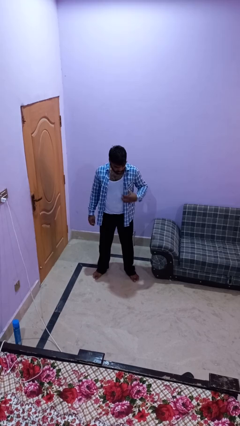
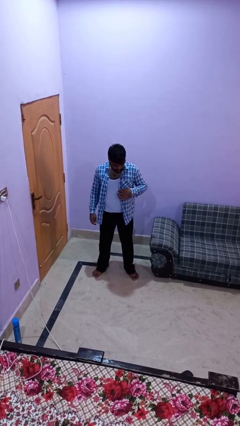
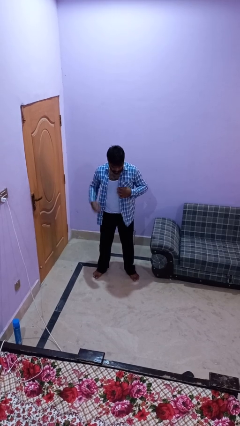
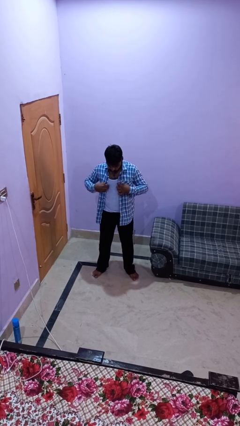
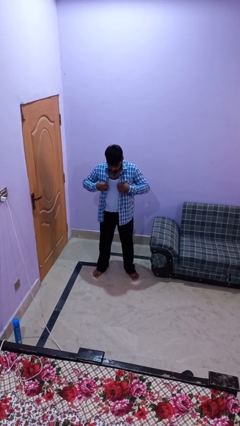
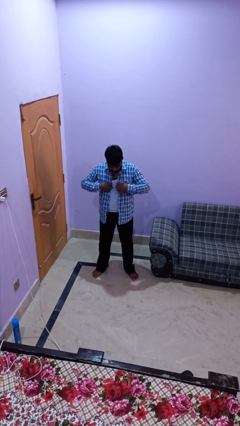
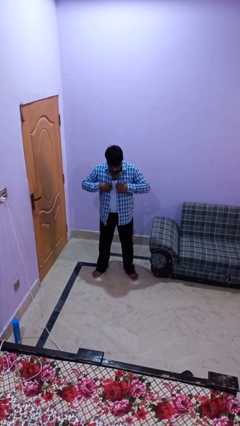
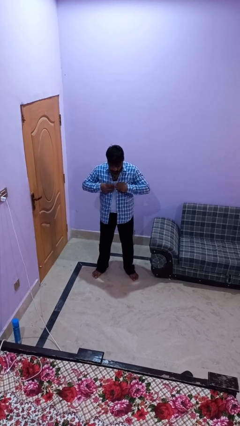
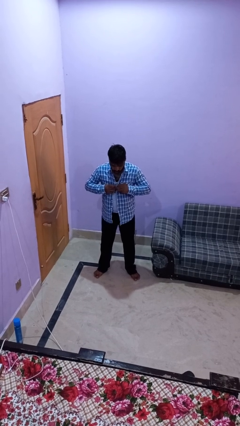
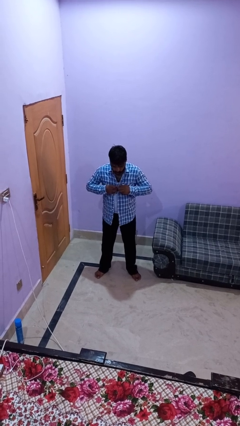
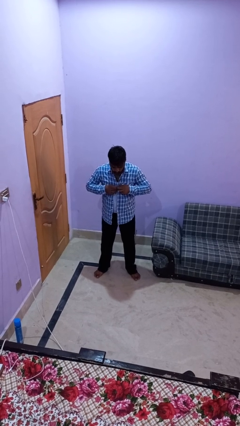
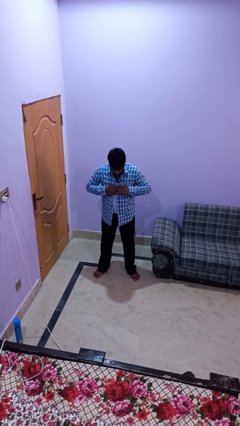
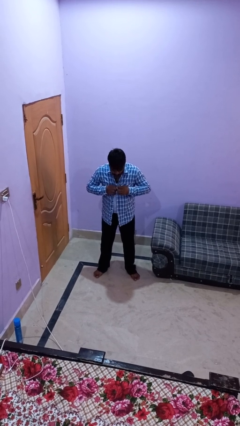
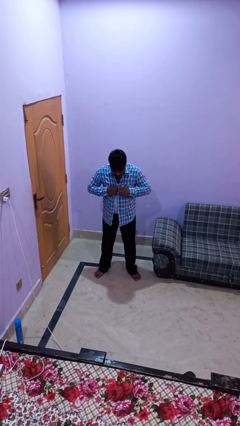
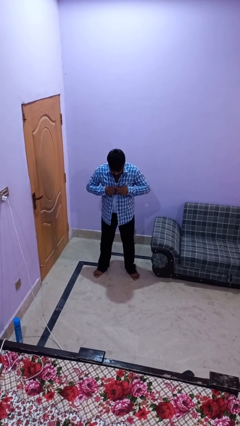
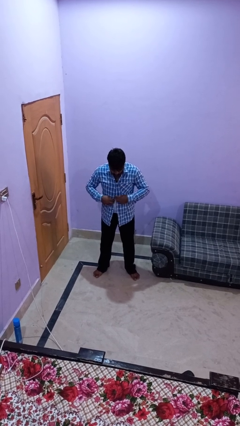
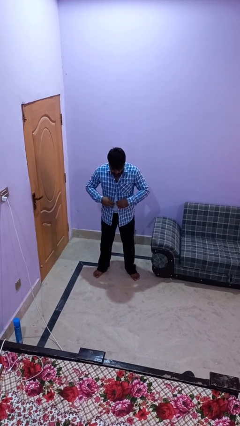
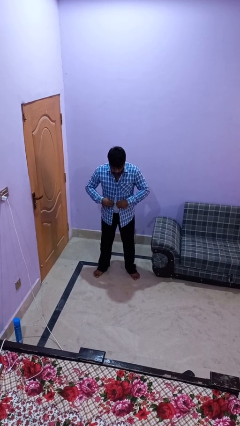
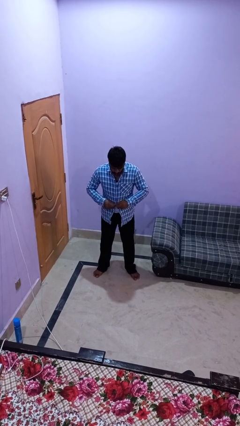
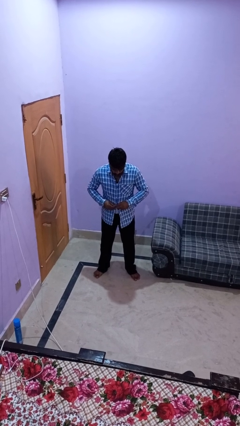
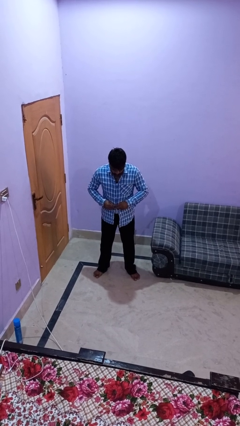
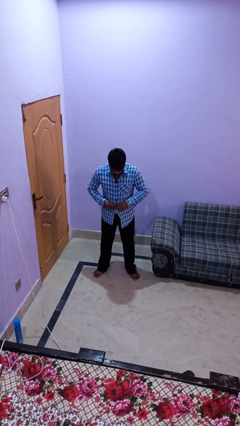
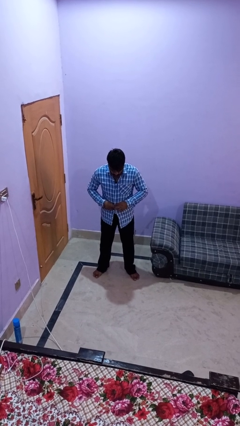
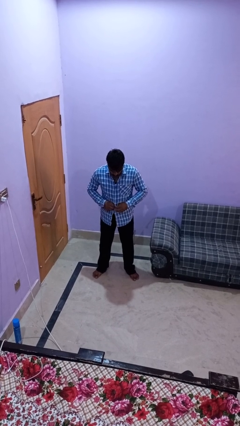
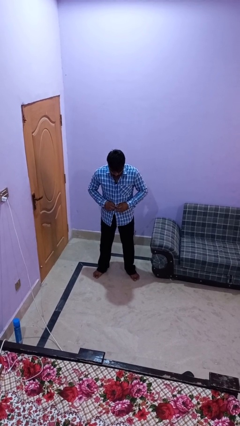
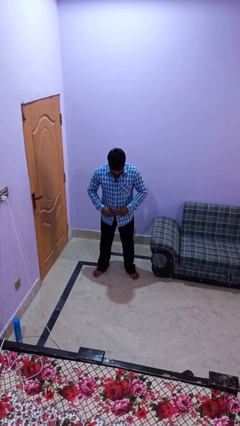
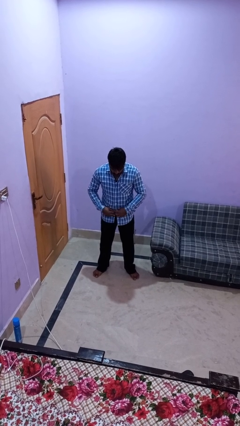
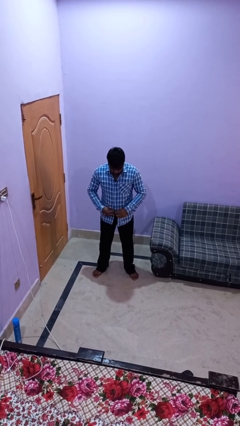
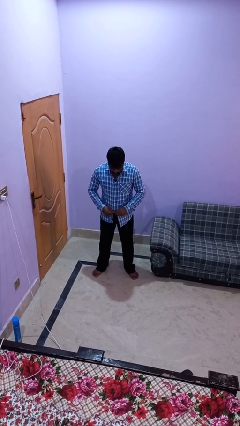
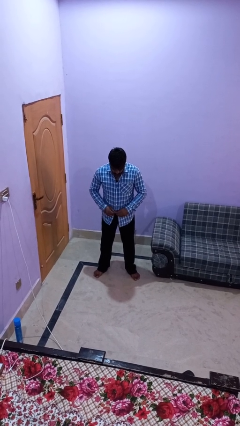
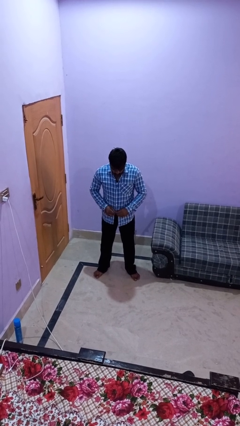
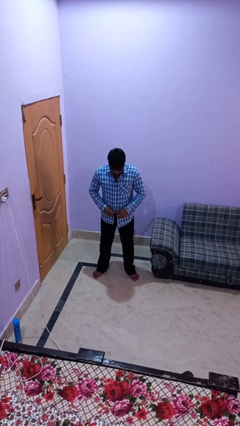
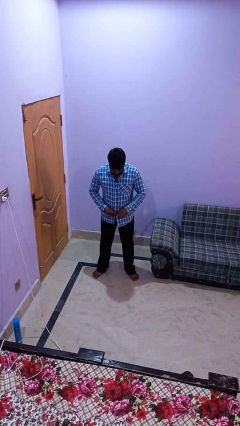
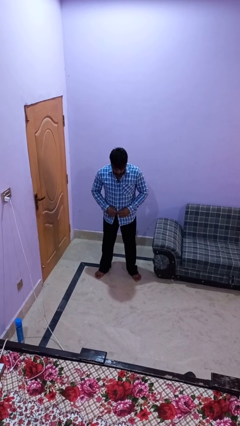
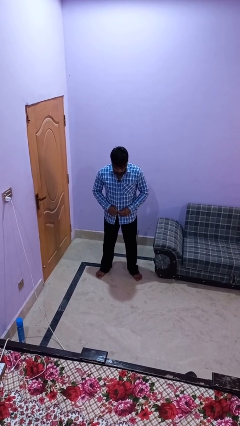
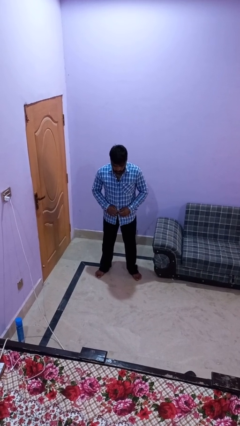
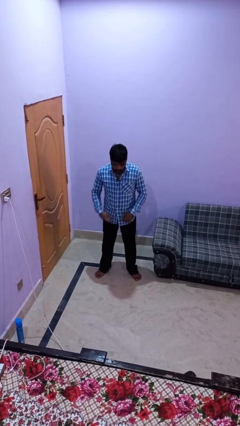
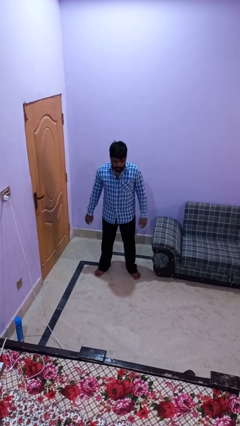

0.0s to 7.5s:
person buttons shirt
